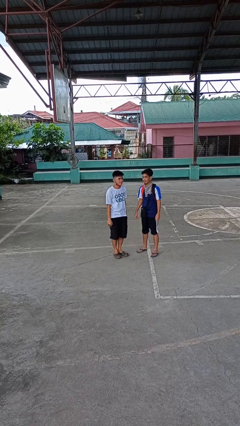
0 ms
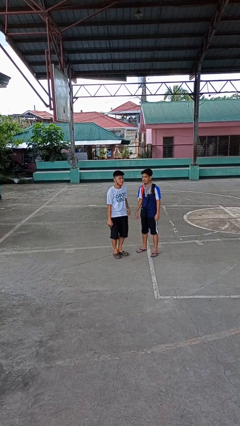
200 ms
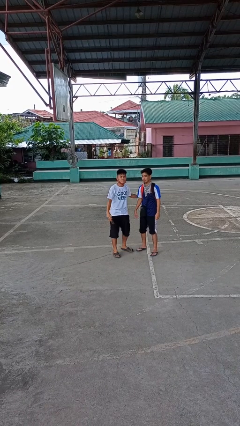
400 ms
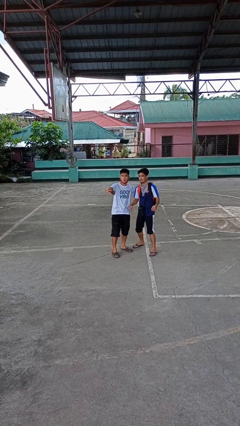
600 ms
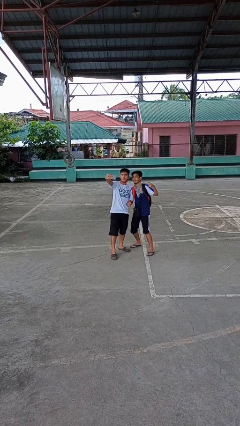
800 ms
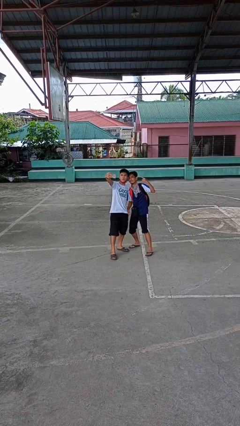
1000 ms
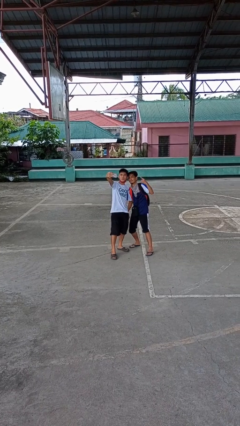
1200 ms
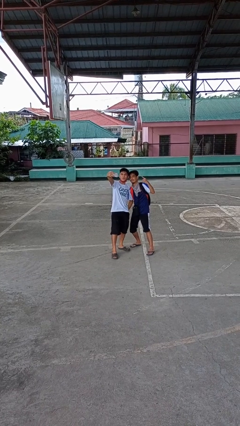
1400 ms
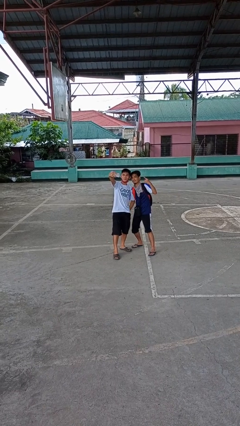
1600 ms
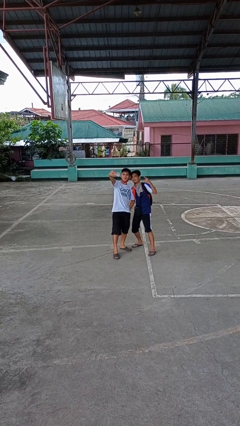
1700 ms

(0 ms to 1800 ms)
person takes selfie with person

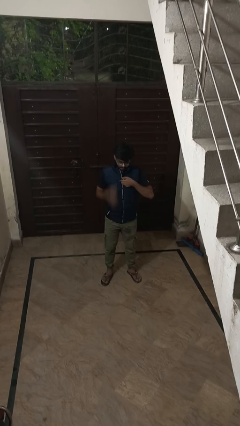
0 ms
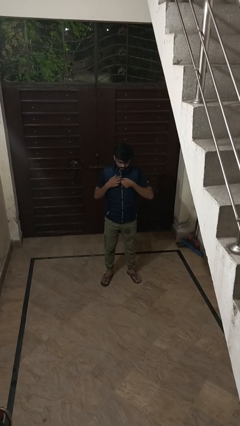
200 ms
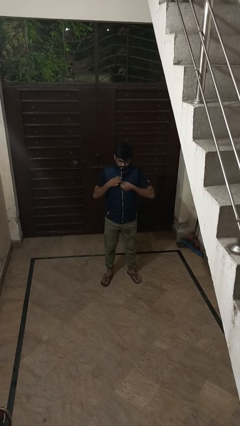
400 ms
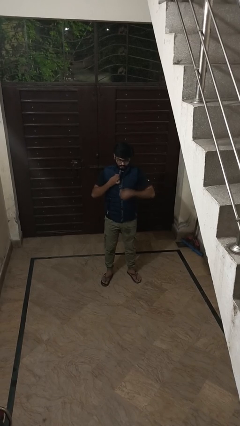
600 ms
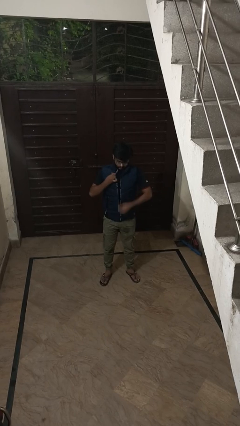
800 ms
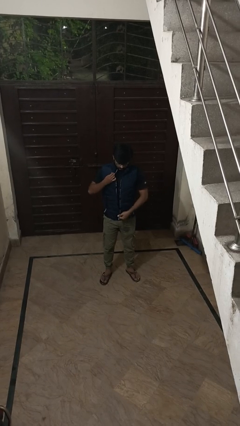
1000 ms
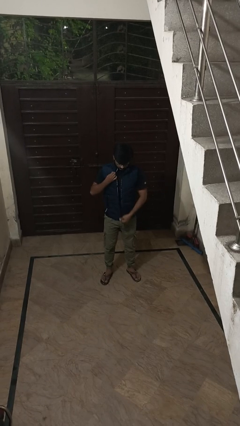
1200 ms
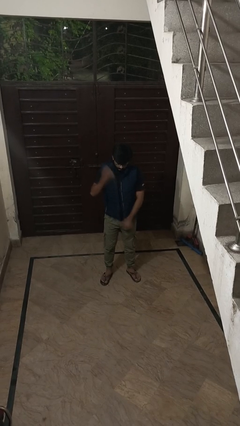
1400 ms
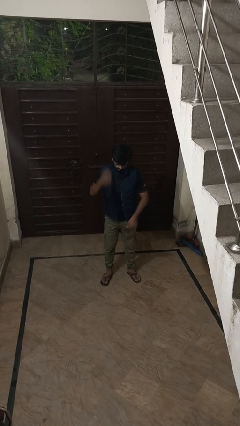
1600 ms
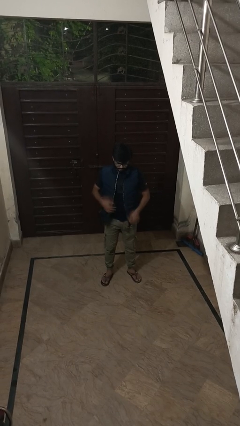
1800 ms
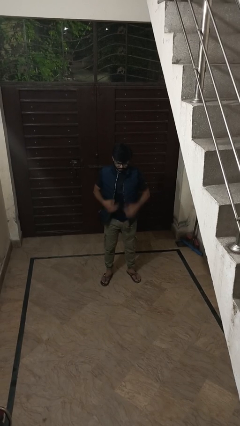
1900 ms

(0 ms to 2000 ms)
person unzips jacket

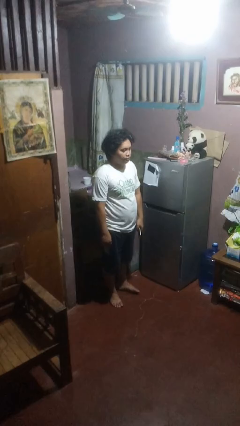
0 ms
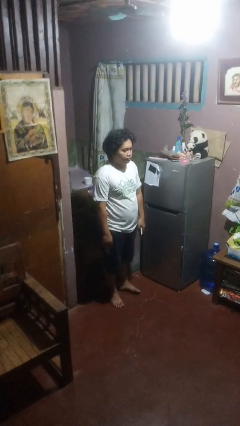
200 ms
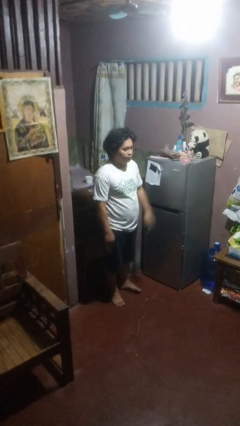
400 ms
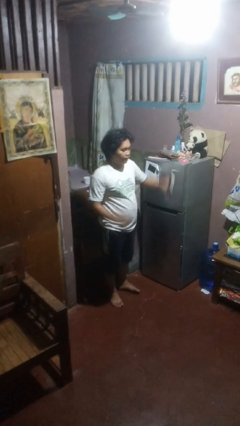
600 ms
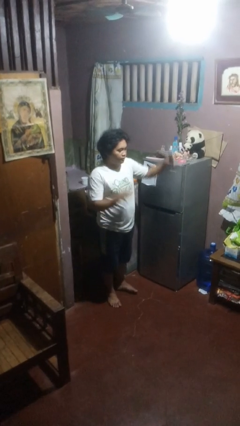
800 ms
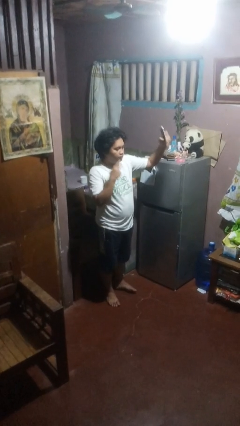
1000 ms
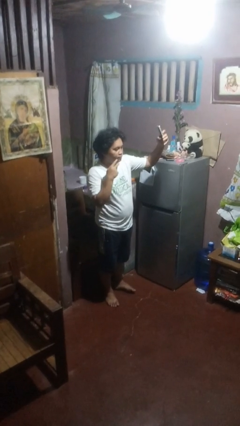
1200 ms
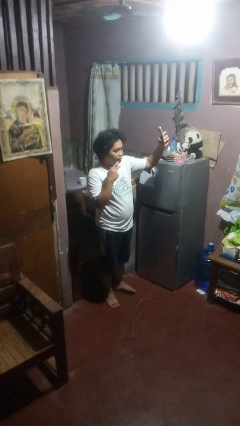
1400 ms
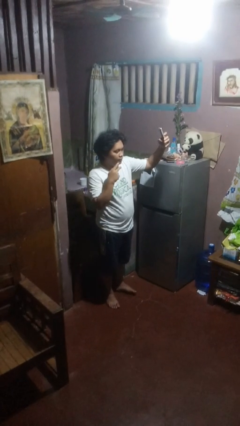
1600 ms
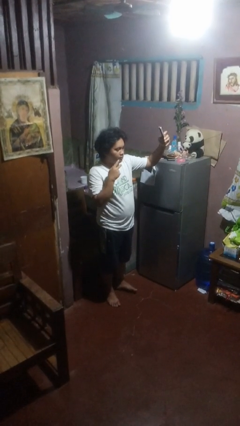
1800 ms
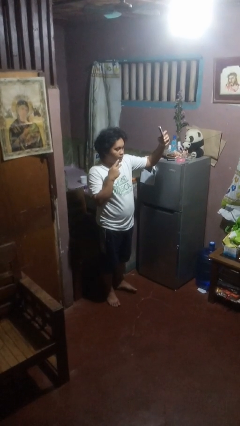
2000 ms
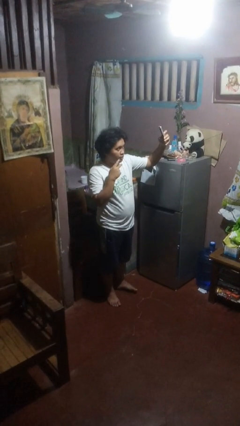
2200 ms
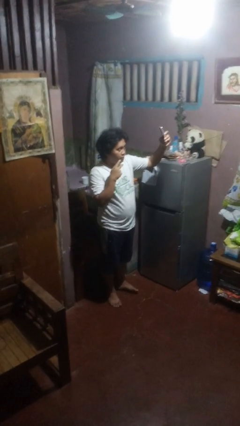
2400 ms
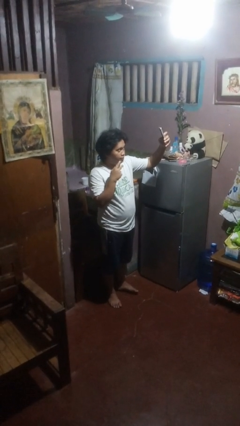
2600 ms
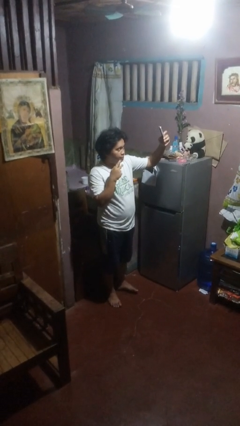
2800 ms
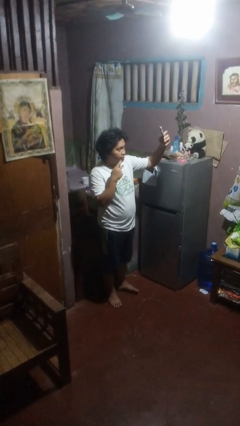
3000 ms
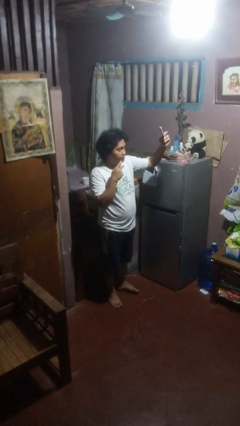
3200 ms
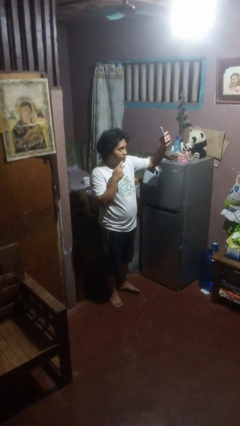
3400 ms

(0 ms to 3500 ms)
person takes selfie

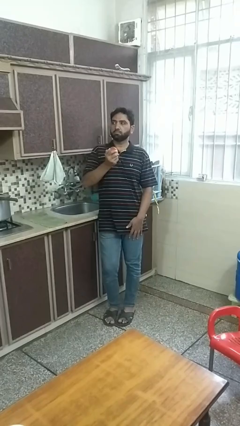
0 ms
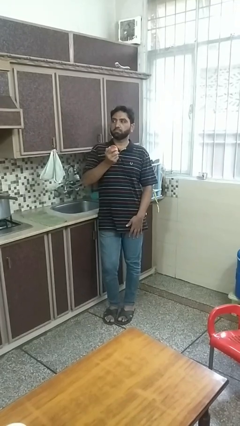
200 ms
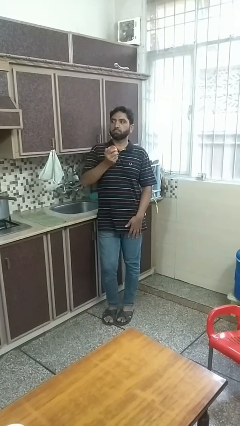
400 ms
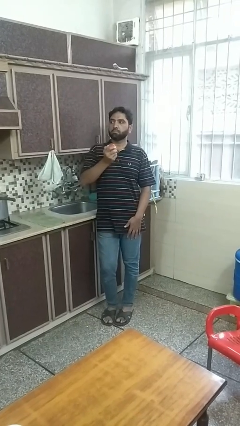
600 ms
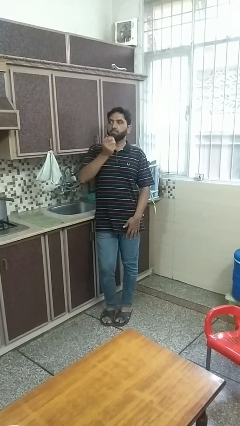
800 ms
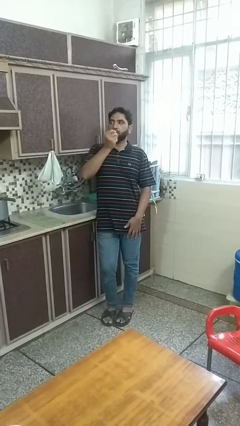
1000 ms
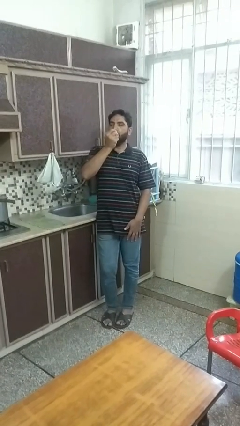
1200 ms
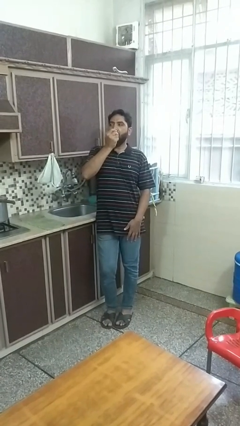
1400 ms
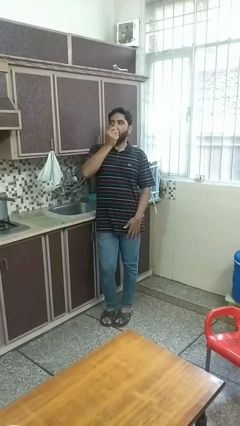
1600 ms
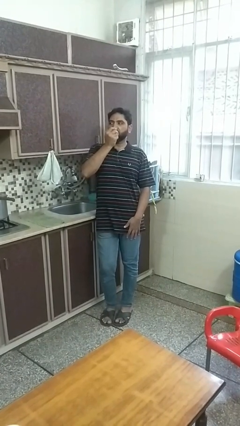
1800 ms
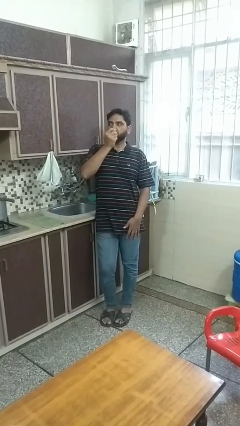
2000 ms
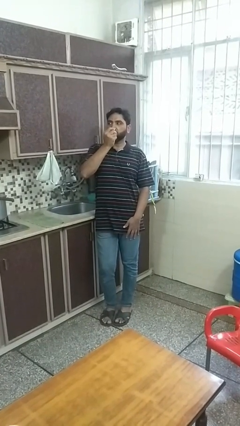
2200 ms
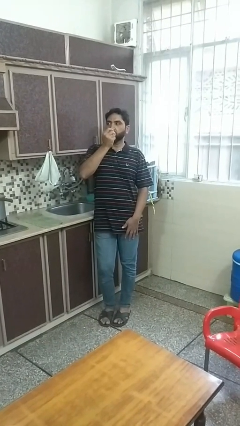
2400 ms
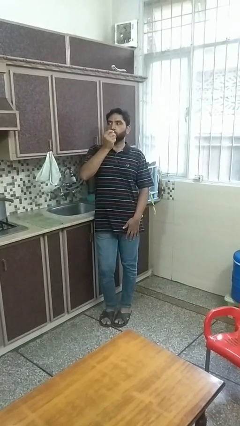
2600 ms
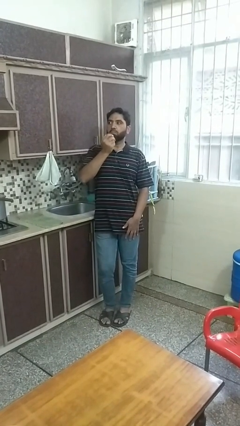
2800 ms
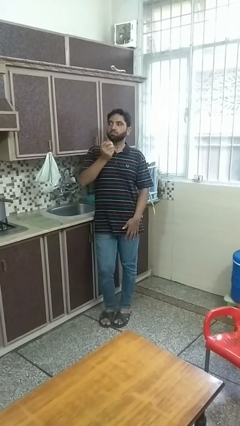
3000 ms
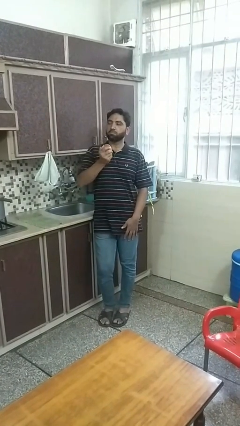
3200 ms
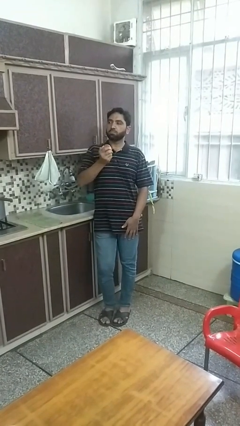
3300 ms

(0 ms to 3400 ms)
person eats apple

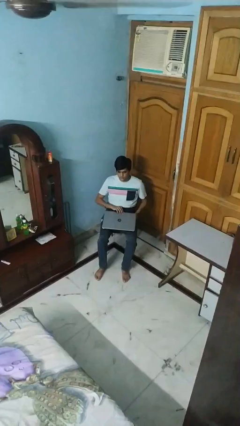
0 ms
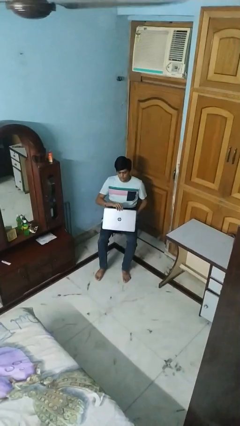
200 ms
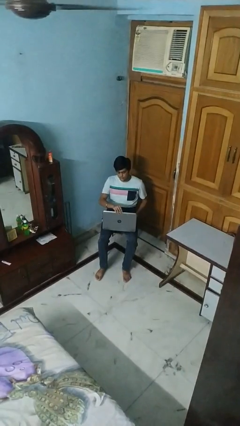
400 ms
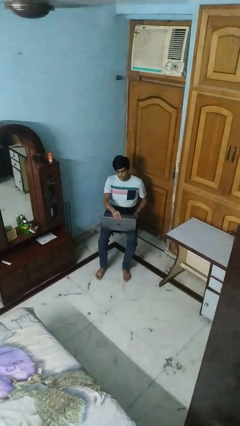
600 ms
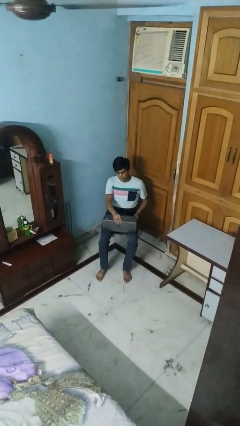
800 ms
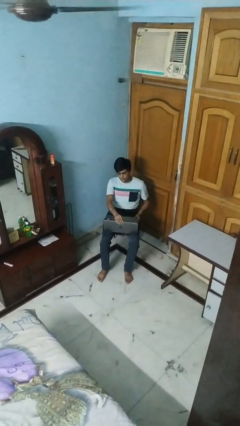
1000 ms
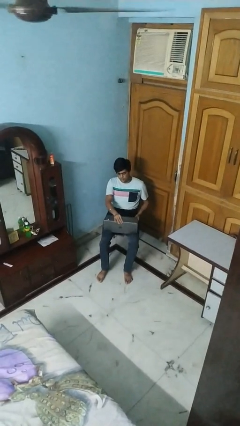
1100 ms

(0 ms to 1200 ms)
person opens laptop

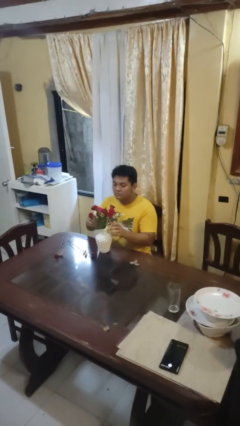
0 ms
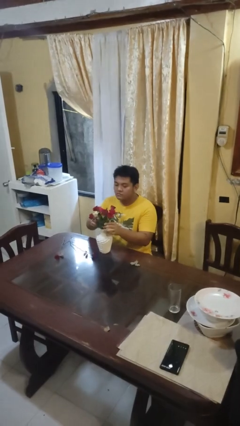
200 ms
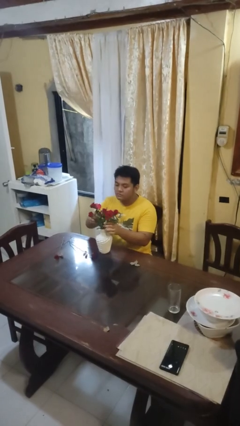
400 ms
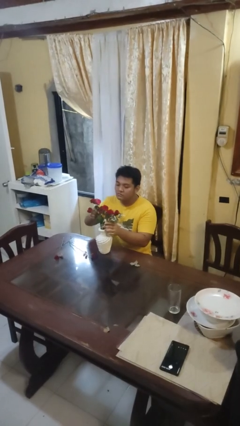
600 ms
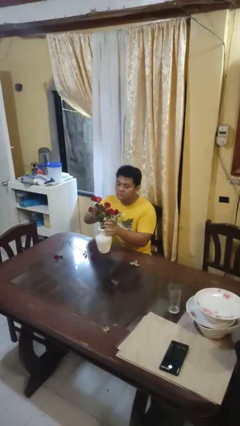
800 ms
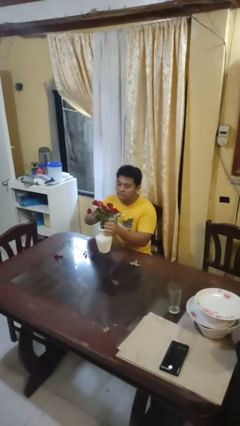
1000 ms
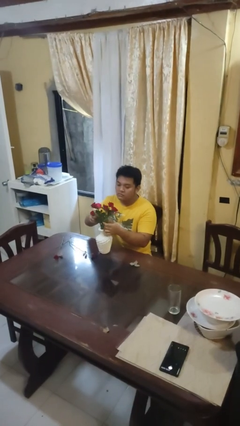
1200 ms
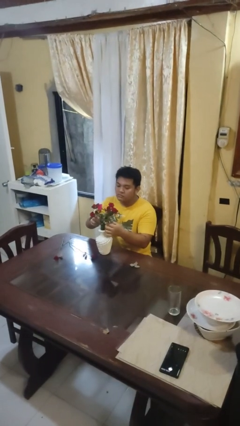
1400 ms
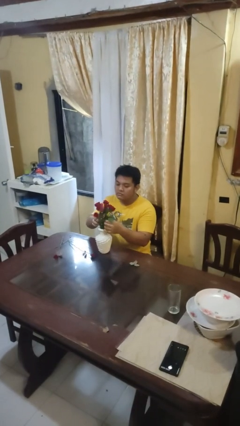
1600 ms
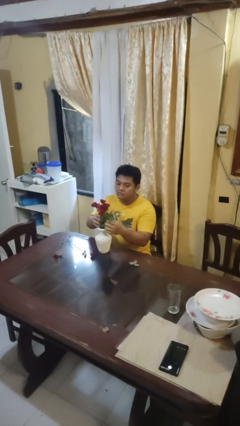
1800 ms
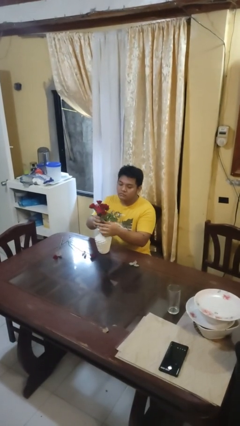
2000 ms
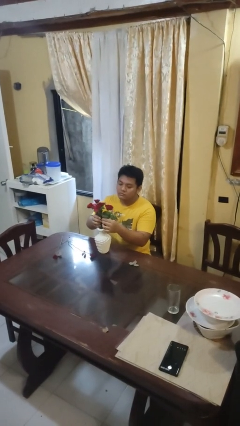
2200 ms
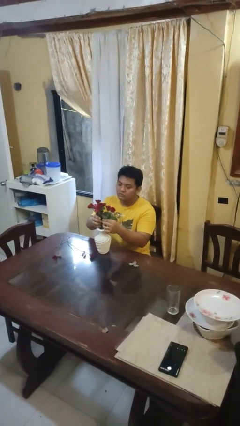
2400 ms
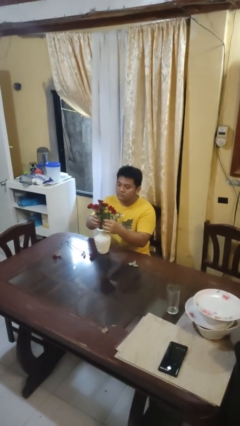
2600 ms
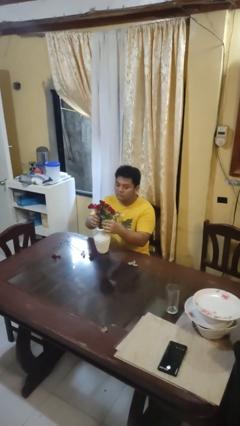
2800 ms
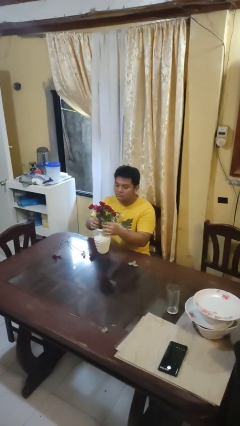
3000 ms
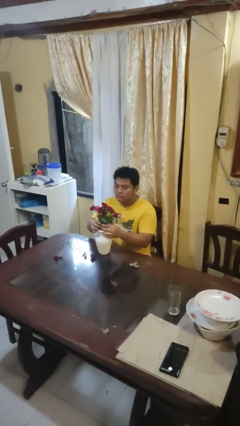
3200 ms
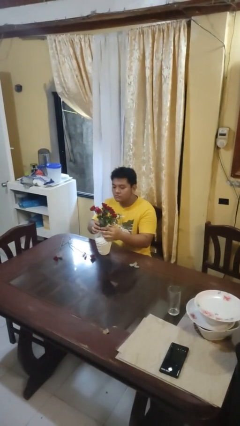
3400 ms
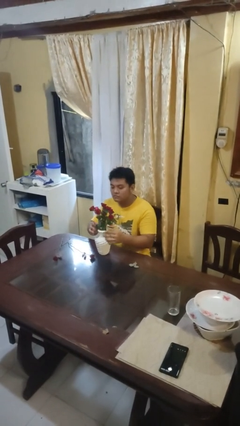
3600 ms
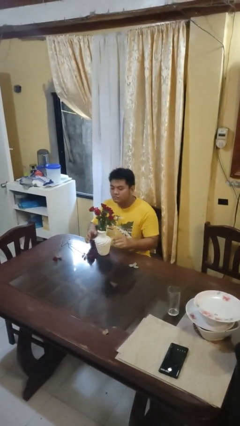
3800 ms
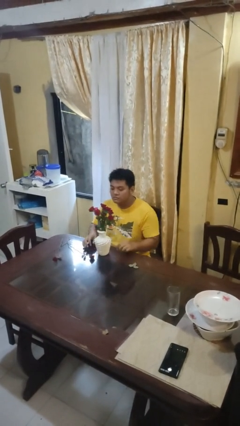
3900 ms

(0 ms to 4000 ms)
person arranges flowers in vase

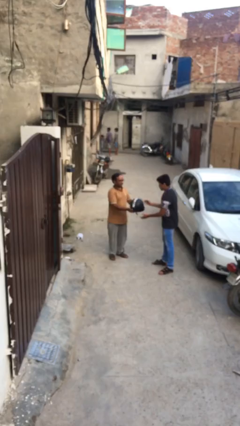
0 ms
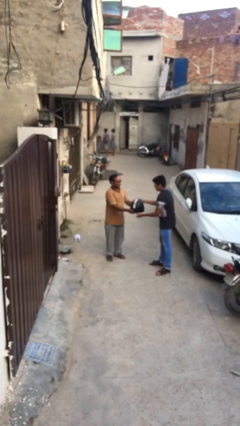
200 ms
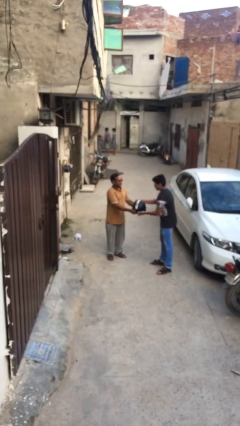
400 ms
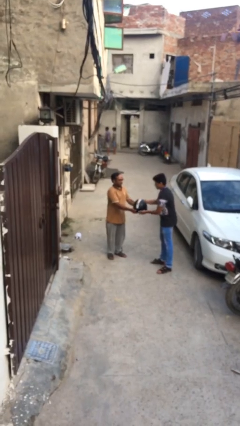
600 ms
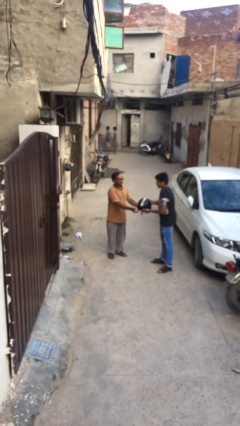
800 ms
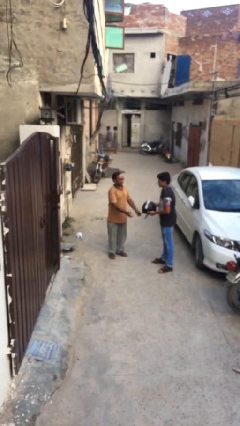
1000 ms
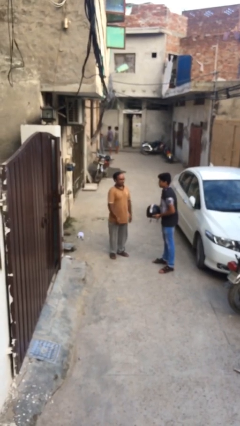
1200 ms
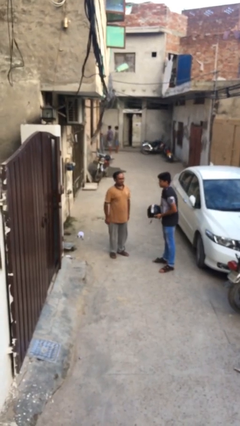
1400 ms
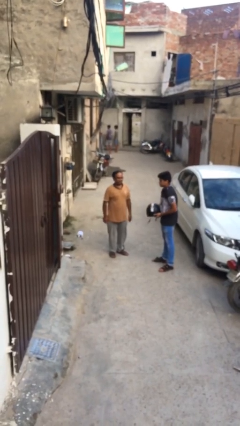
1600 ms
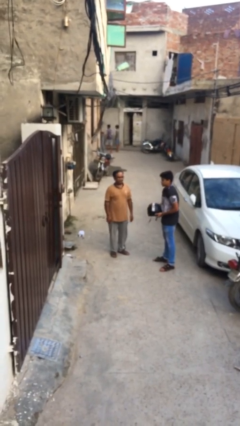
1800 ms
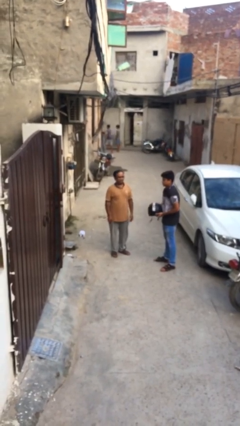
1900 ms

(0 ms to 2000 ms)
person transfers object to person
